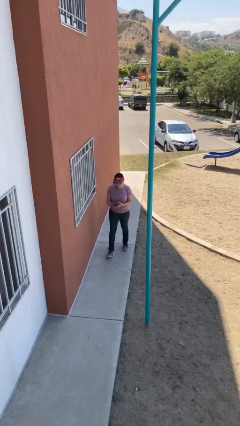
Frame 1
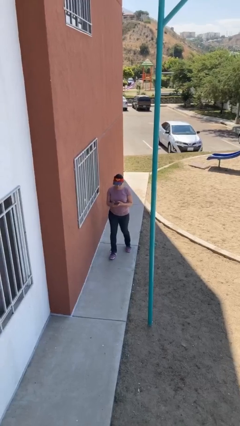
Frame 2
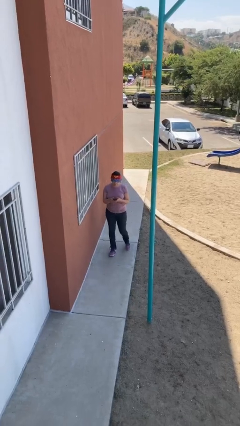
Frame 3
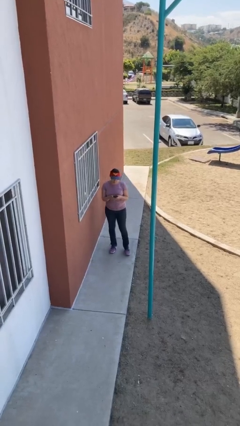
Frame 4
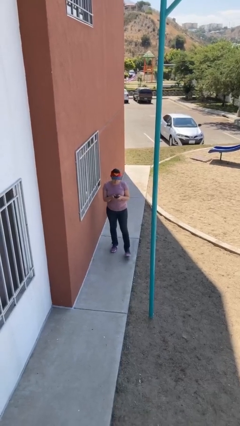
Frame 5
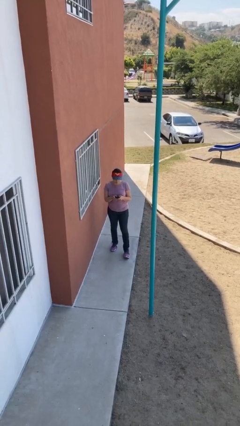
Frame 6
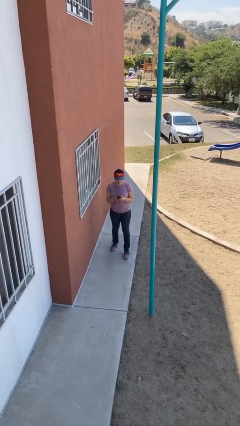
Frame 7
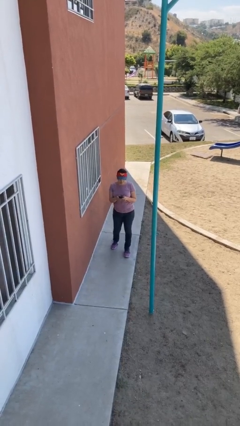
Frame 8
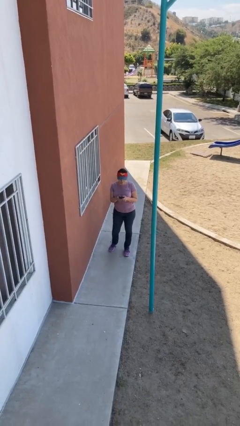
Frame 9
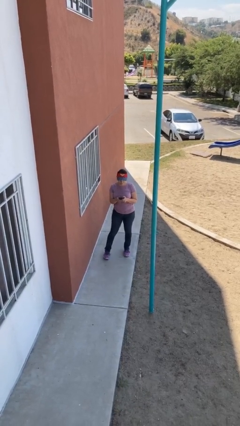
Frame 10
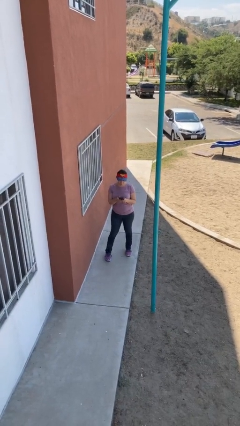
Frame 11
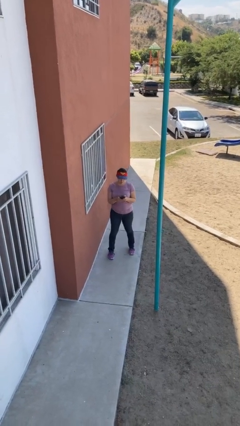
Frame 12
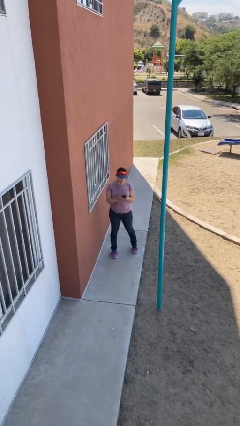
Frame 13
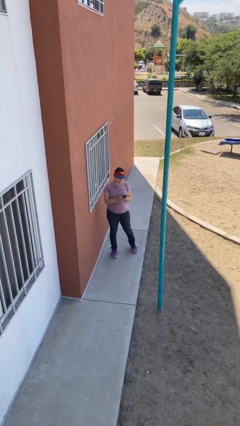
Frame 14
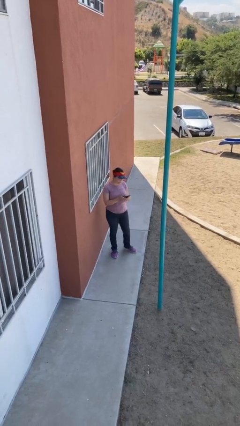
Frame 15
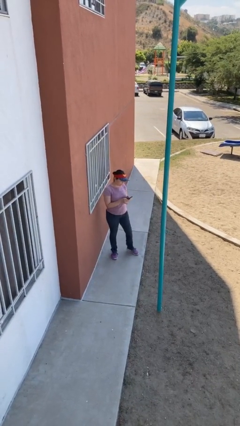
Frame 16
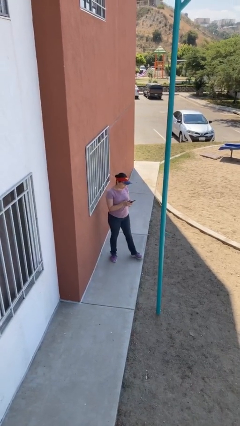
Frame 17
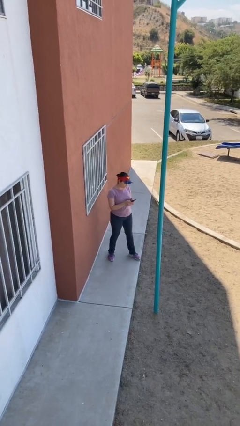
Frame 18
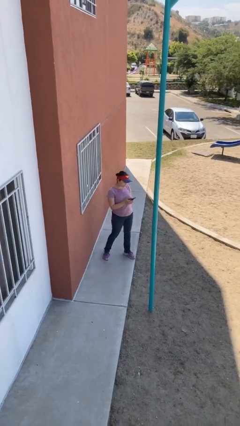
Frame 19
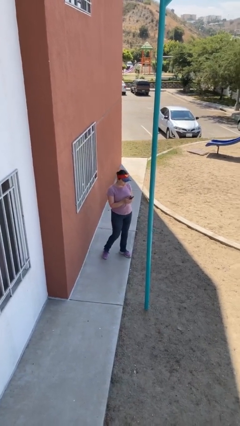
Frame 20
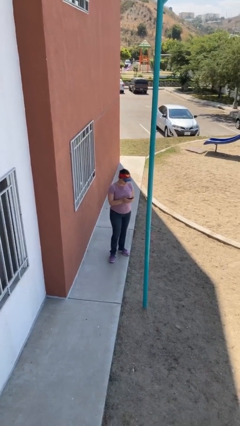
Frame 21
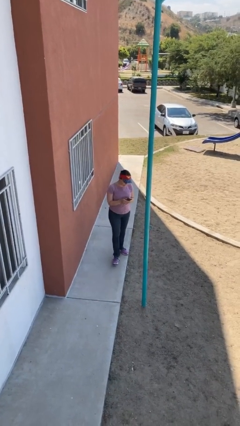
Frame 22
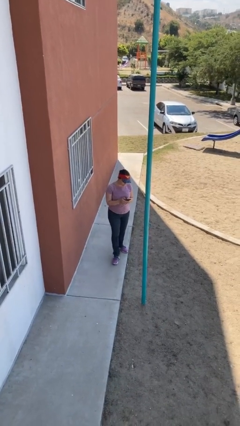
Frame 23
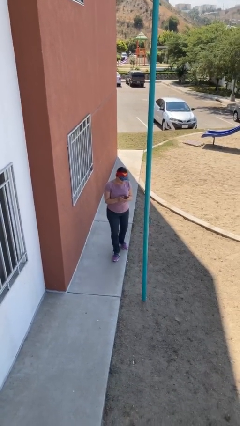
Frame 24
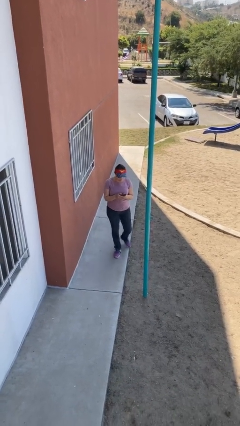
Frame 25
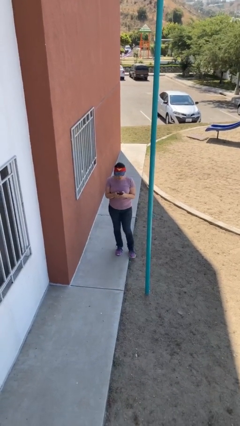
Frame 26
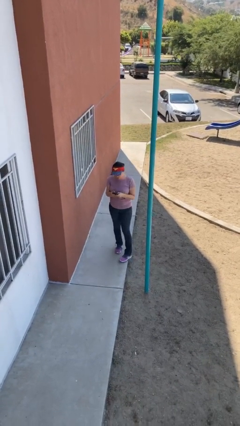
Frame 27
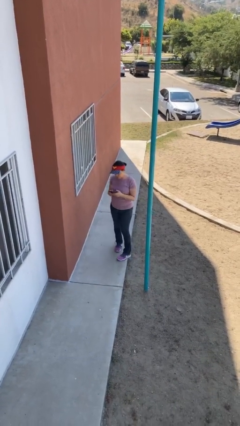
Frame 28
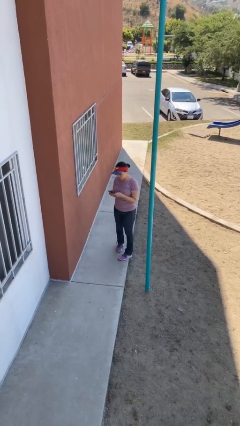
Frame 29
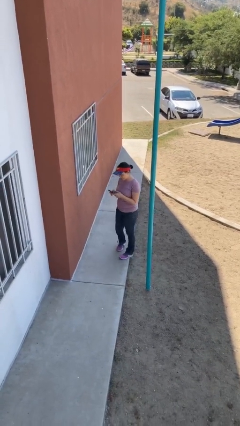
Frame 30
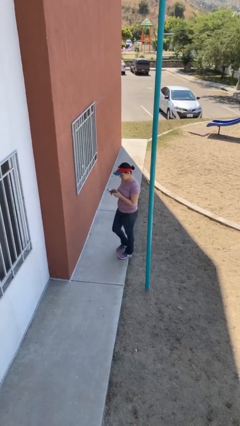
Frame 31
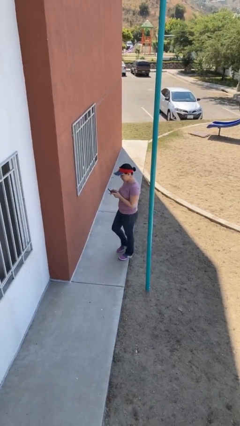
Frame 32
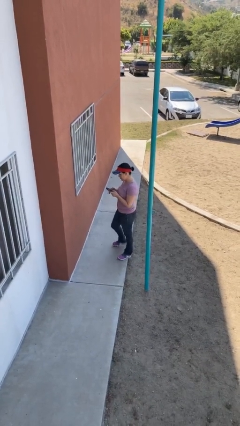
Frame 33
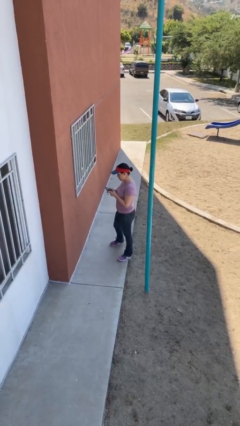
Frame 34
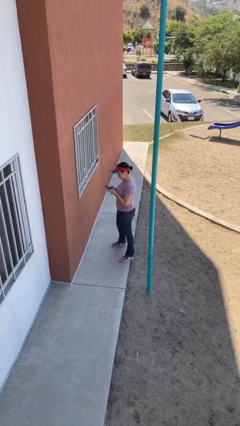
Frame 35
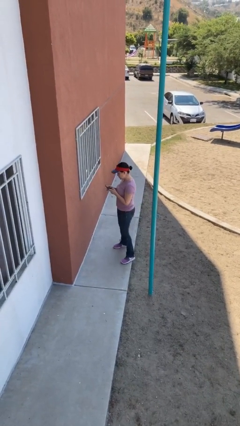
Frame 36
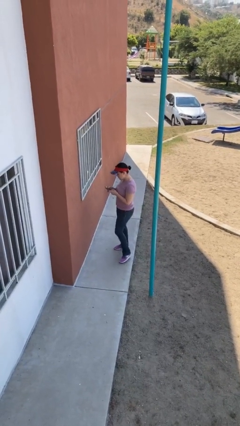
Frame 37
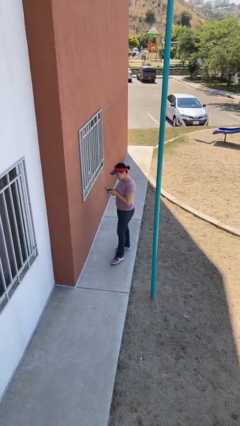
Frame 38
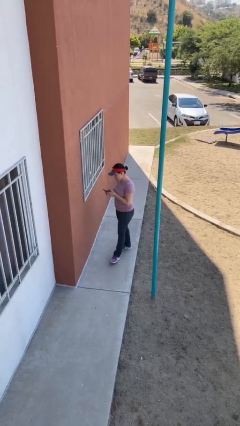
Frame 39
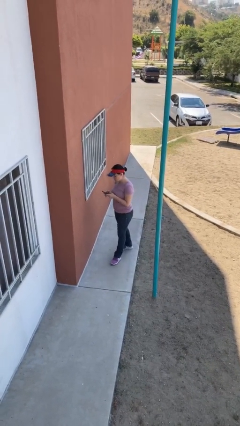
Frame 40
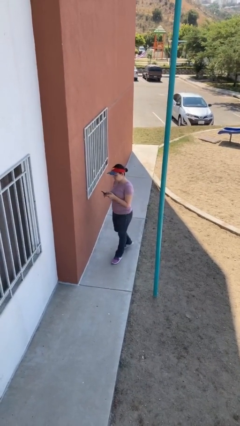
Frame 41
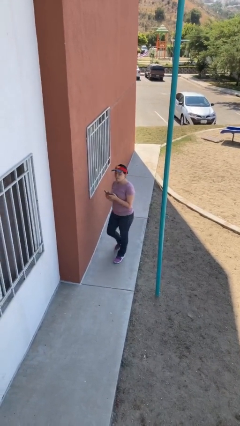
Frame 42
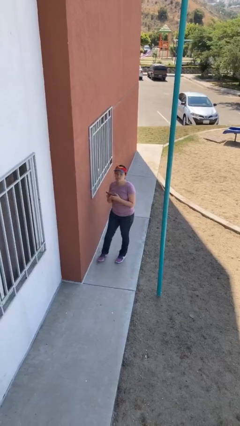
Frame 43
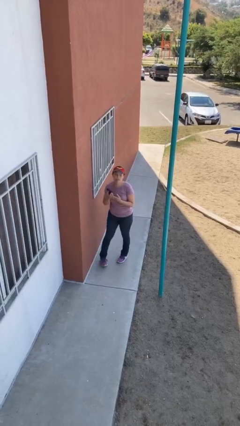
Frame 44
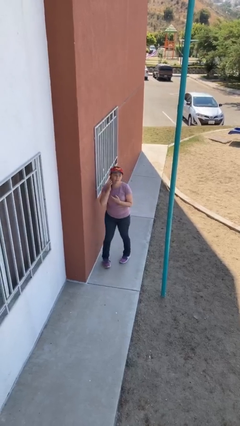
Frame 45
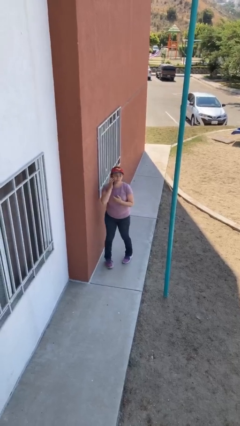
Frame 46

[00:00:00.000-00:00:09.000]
person texts on phone

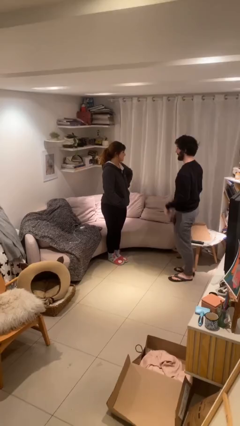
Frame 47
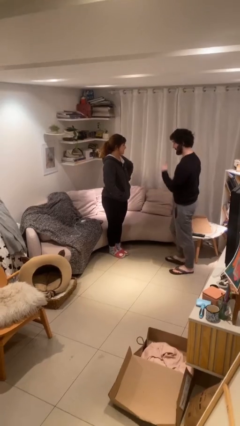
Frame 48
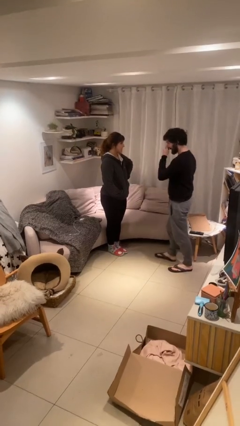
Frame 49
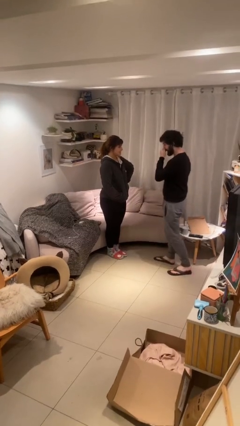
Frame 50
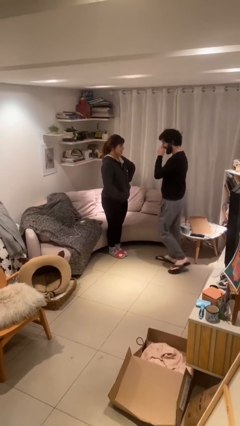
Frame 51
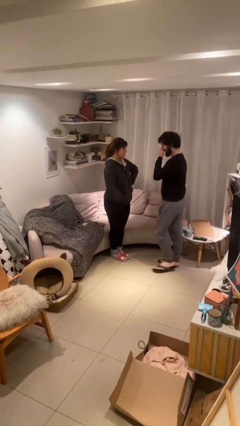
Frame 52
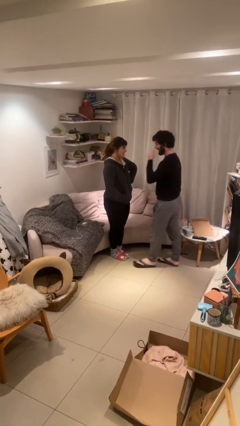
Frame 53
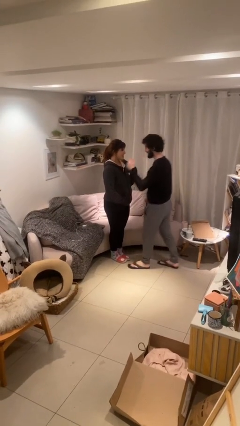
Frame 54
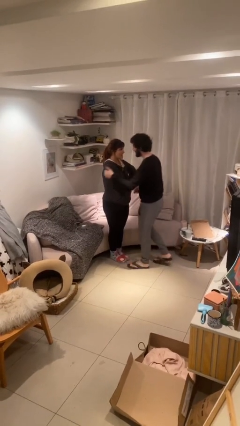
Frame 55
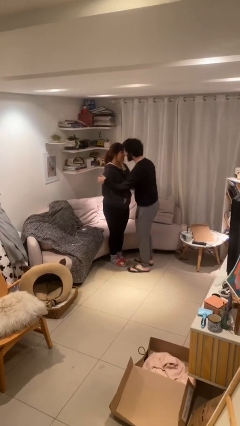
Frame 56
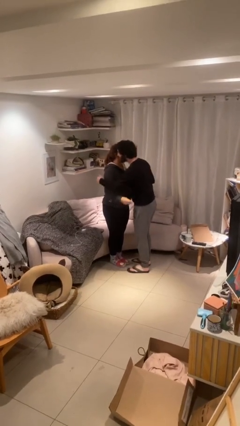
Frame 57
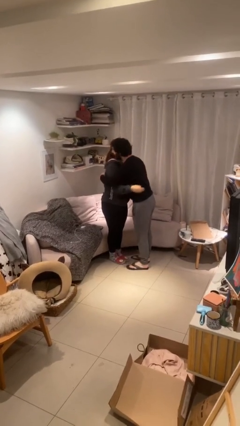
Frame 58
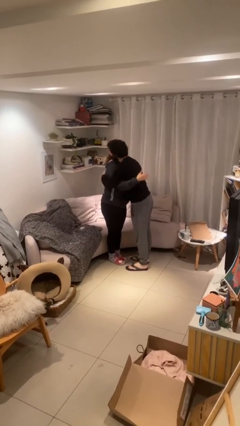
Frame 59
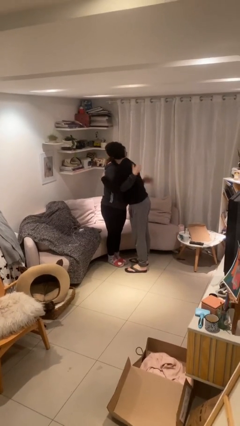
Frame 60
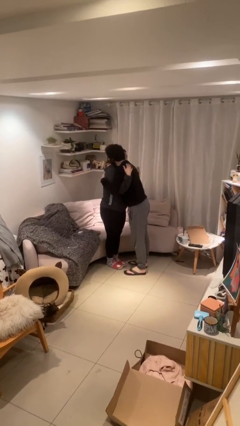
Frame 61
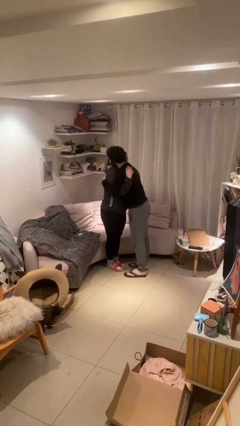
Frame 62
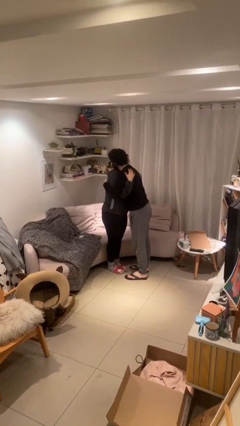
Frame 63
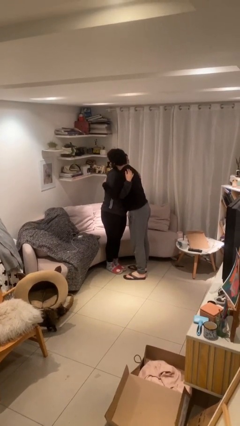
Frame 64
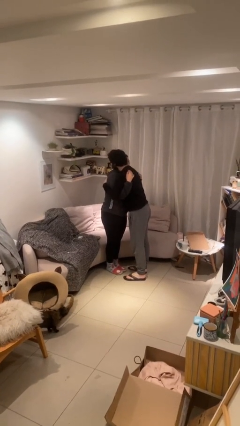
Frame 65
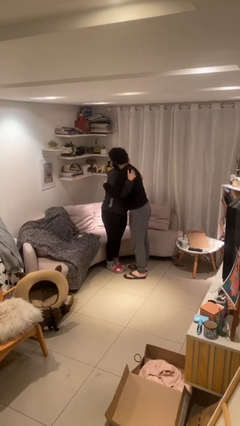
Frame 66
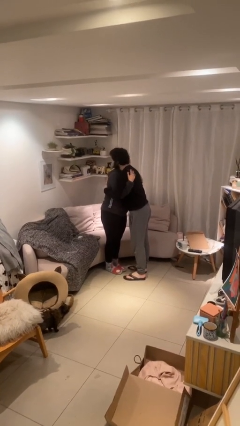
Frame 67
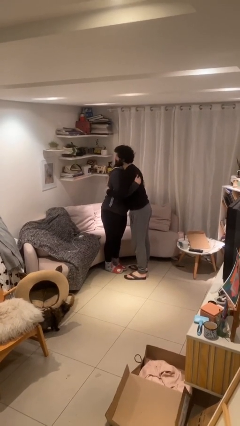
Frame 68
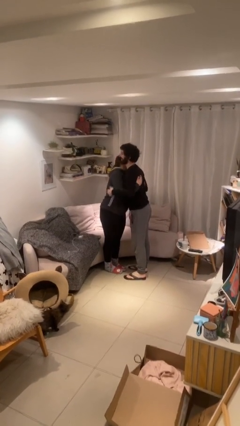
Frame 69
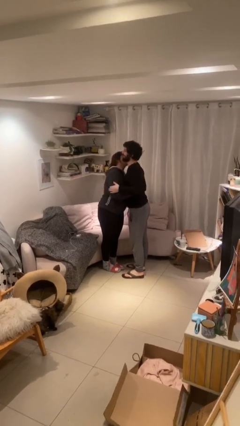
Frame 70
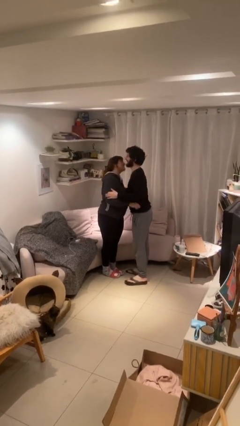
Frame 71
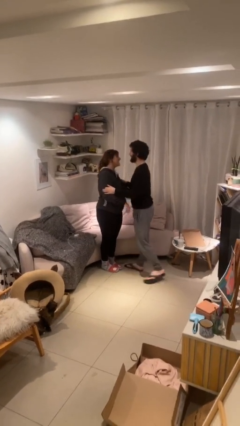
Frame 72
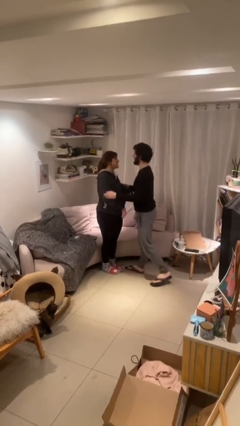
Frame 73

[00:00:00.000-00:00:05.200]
person embraces person

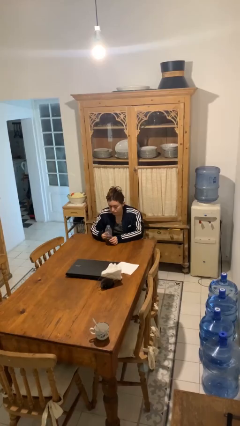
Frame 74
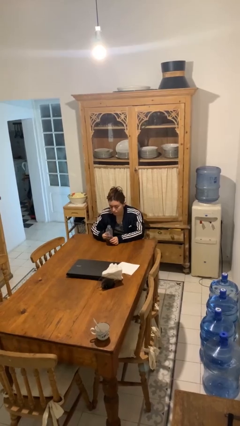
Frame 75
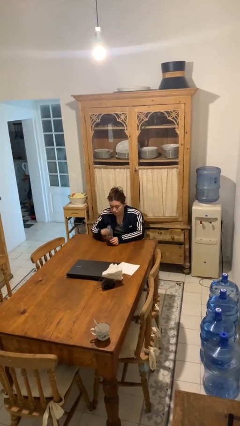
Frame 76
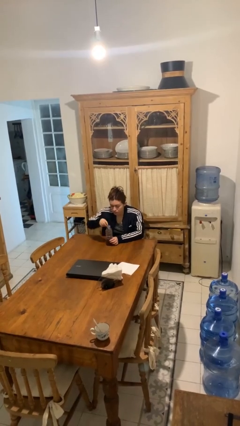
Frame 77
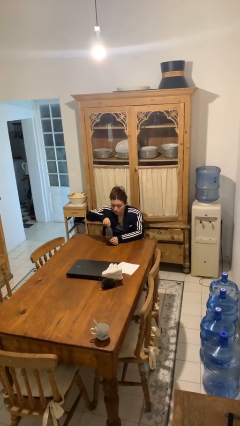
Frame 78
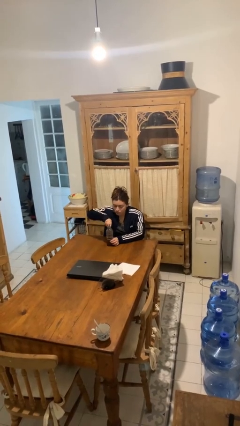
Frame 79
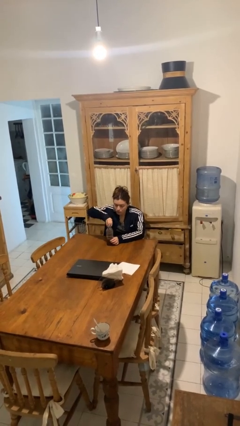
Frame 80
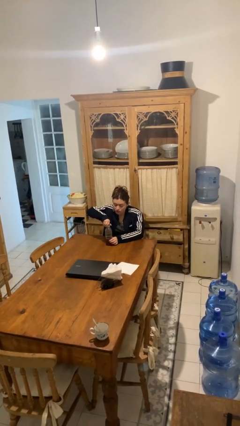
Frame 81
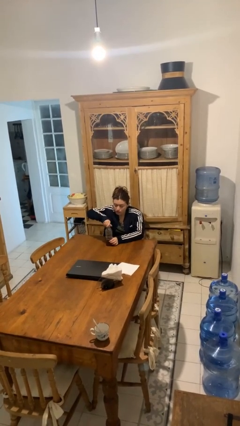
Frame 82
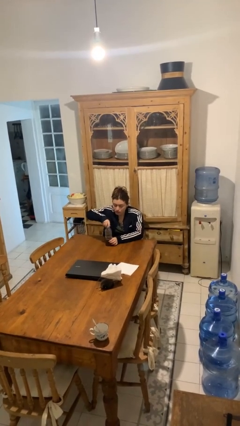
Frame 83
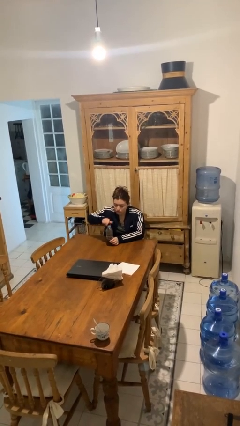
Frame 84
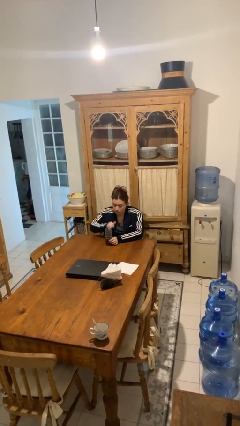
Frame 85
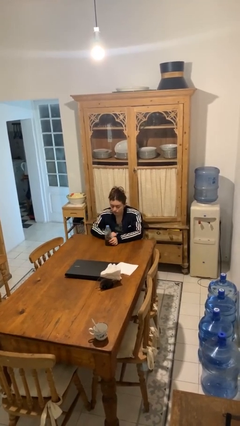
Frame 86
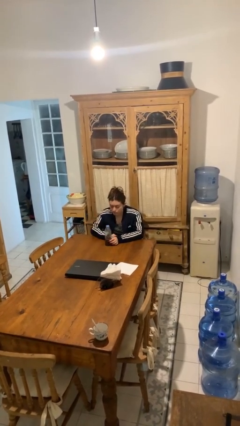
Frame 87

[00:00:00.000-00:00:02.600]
person screws lid to bottle

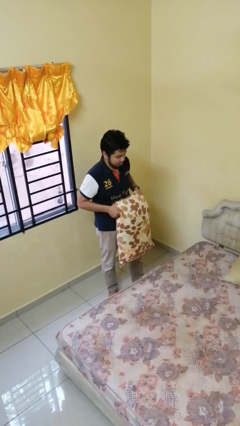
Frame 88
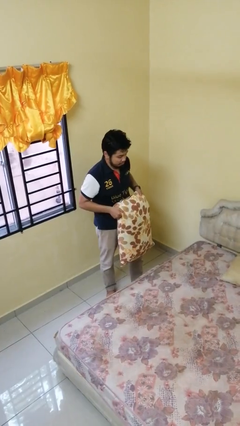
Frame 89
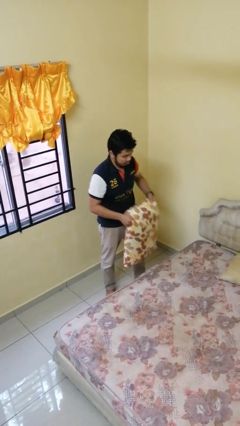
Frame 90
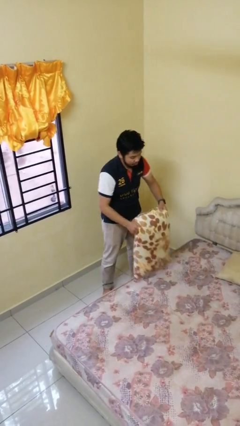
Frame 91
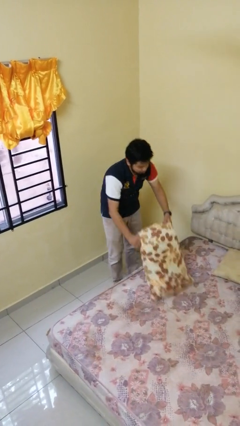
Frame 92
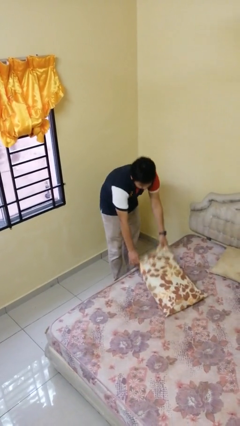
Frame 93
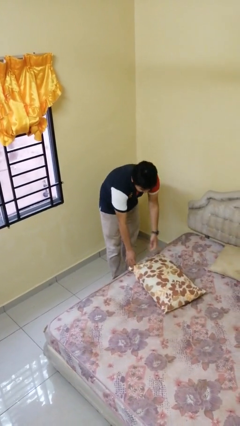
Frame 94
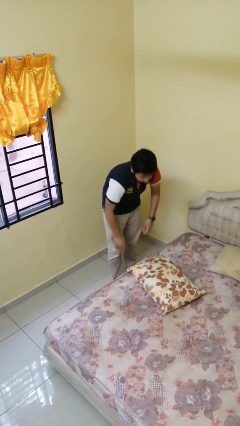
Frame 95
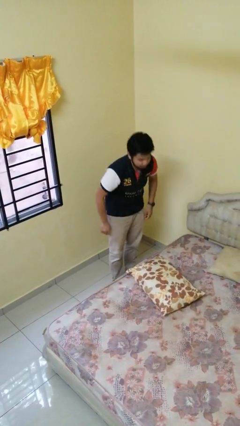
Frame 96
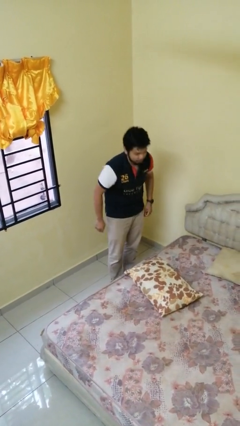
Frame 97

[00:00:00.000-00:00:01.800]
person puts down object on bed
